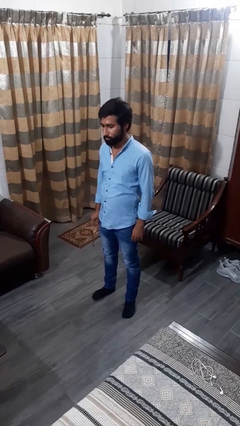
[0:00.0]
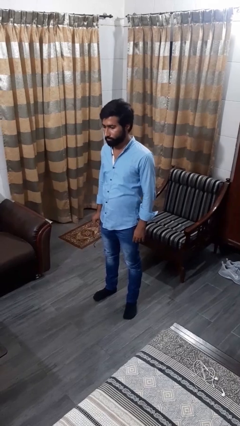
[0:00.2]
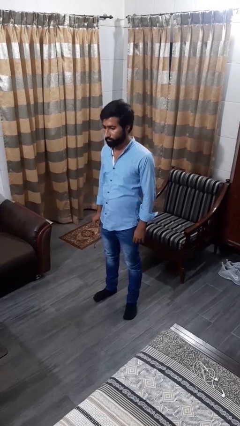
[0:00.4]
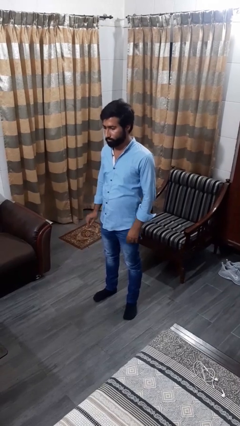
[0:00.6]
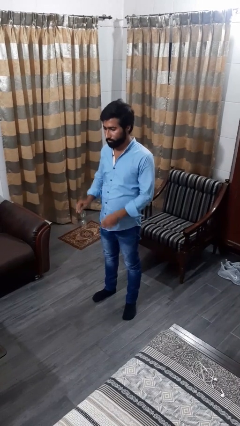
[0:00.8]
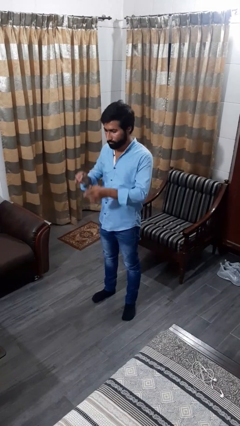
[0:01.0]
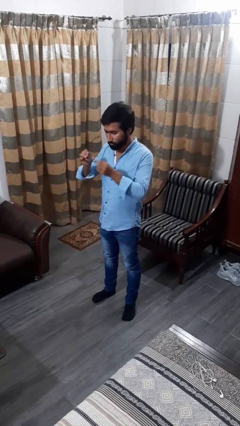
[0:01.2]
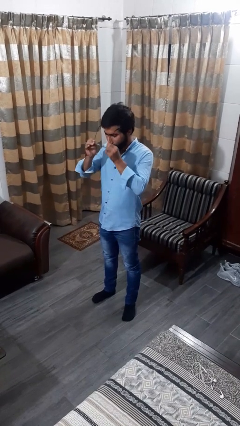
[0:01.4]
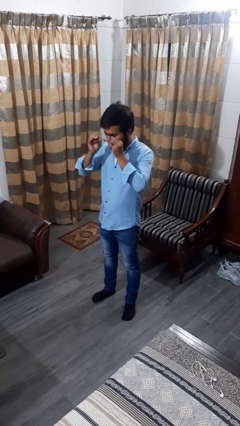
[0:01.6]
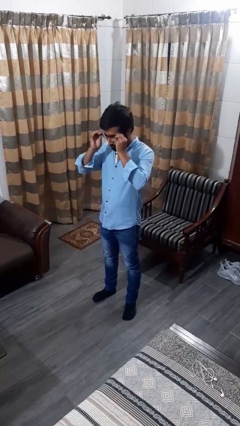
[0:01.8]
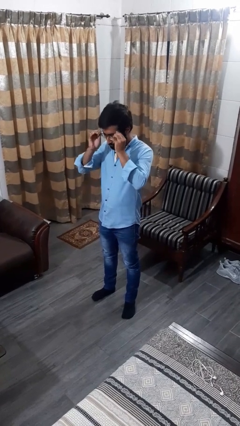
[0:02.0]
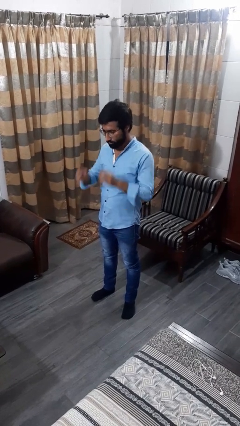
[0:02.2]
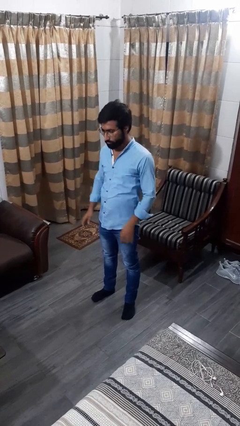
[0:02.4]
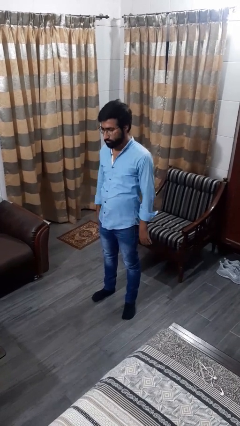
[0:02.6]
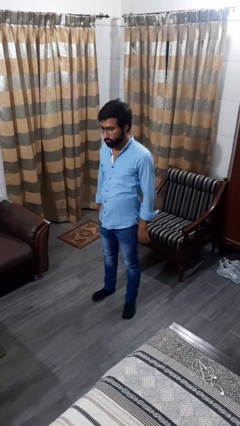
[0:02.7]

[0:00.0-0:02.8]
person puts on glasses

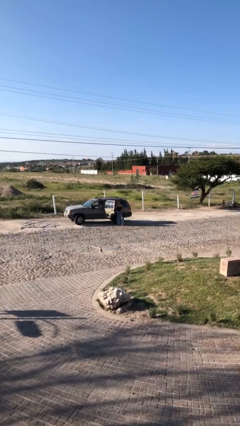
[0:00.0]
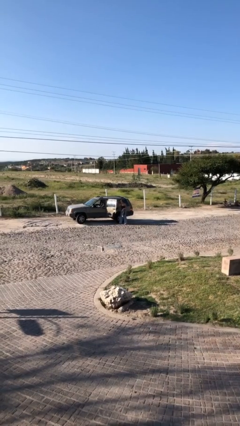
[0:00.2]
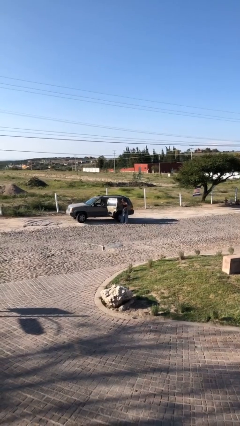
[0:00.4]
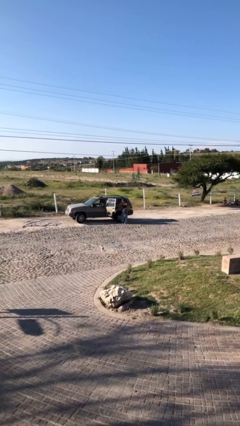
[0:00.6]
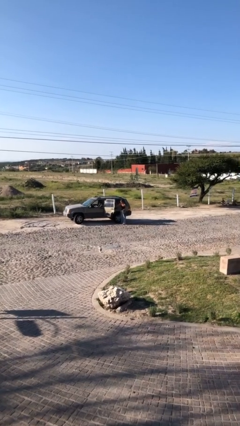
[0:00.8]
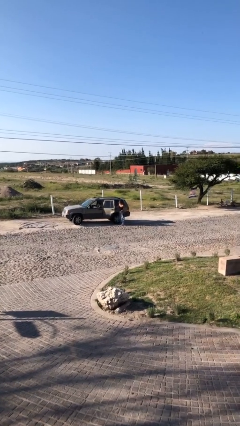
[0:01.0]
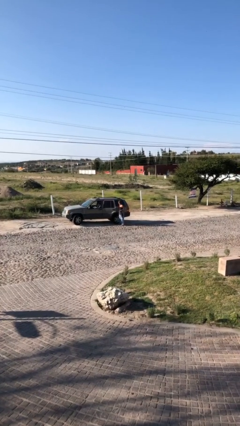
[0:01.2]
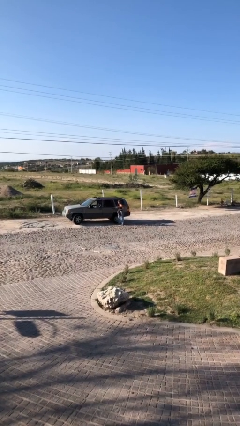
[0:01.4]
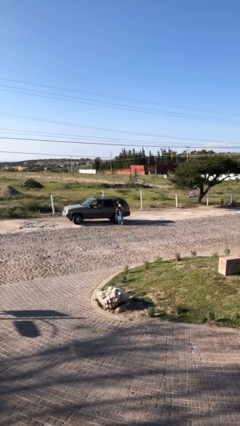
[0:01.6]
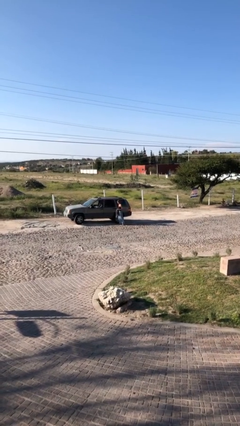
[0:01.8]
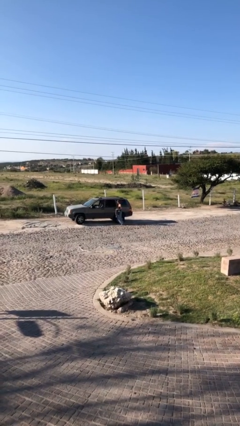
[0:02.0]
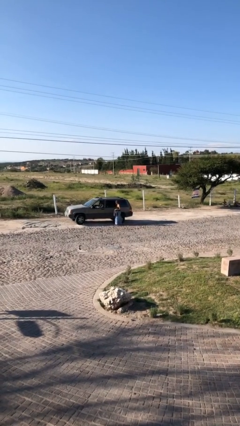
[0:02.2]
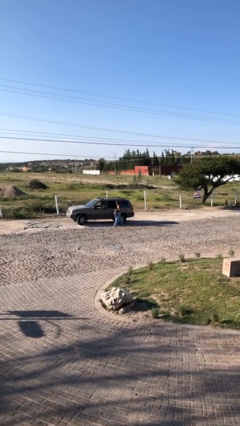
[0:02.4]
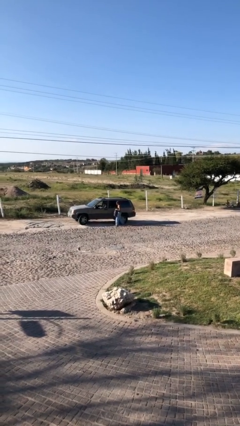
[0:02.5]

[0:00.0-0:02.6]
person closes car door

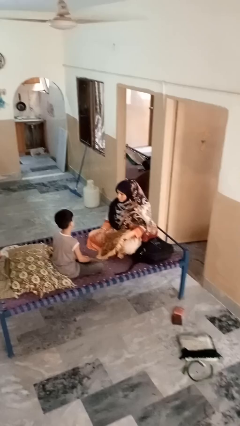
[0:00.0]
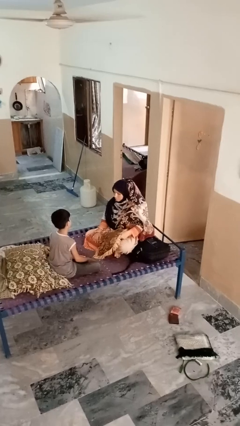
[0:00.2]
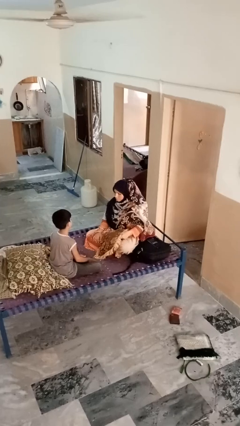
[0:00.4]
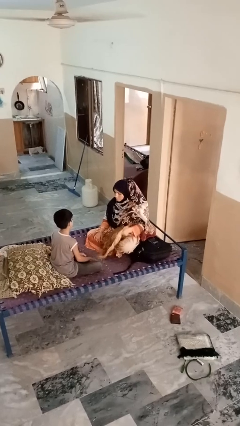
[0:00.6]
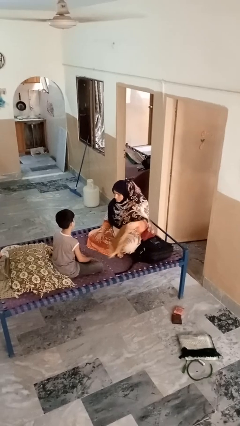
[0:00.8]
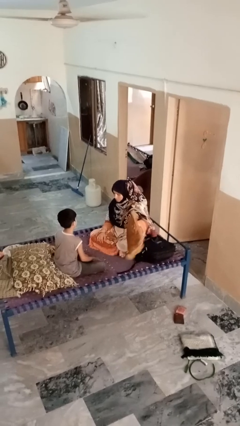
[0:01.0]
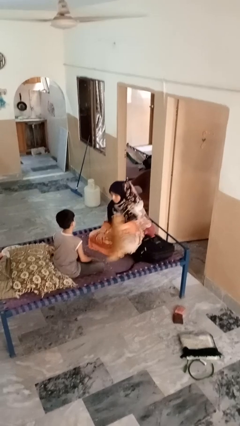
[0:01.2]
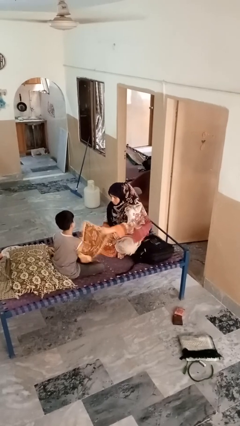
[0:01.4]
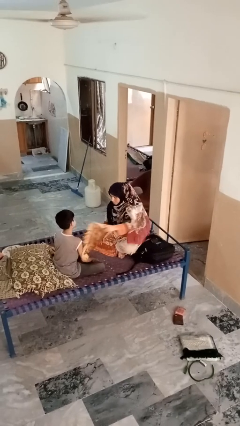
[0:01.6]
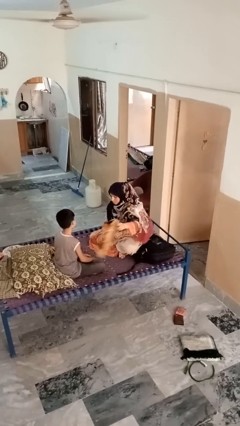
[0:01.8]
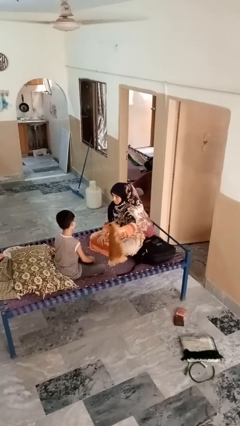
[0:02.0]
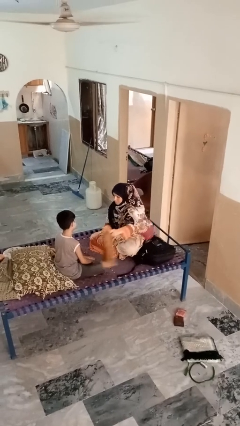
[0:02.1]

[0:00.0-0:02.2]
person hits person with pillow

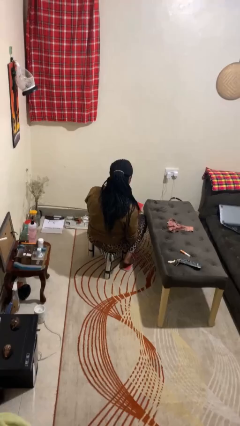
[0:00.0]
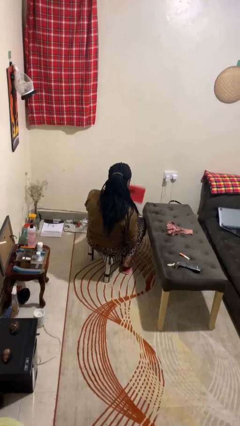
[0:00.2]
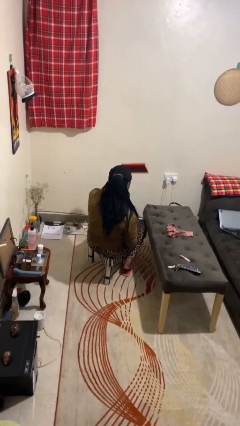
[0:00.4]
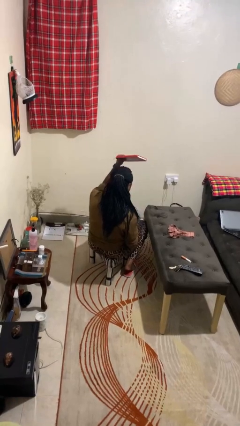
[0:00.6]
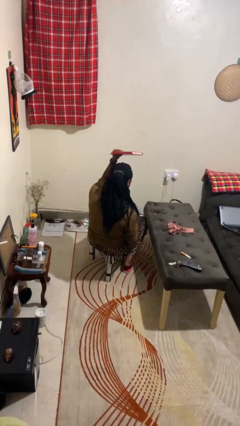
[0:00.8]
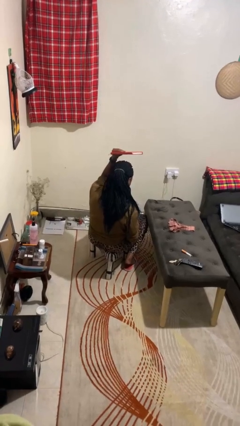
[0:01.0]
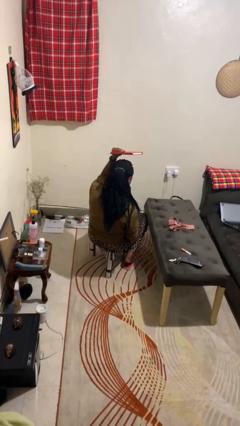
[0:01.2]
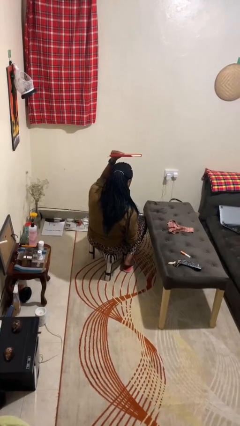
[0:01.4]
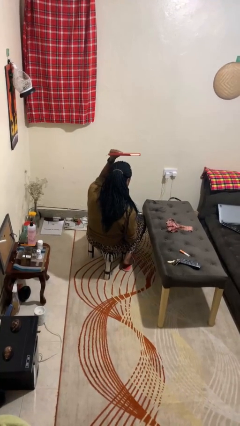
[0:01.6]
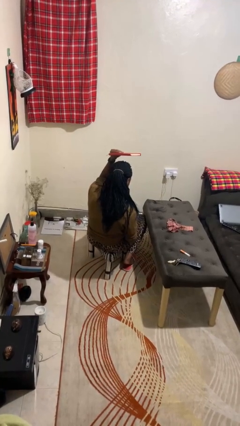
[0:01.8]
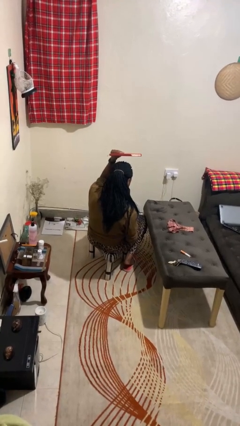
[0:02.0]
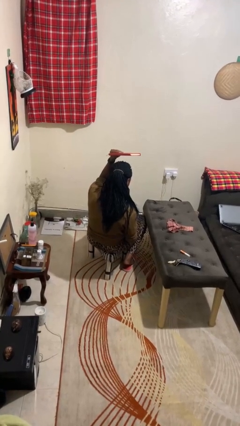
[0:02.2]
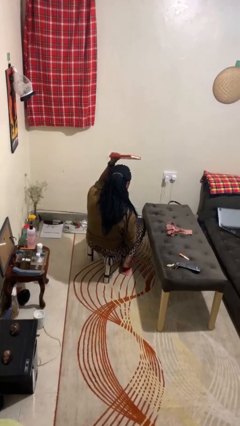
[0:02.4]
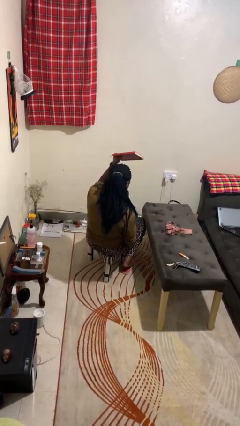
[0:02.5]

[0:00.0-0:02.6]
person holds object above head

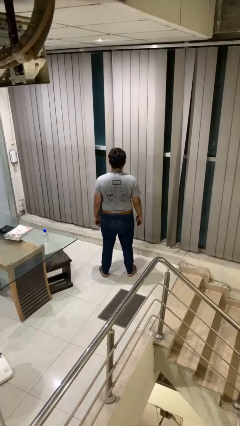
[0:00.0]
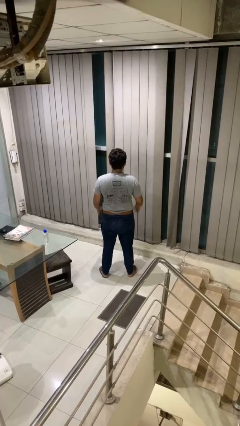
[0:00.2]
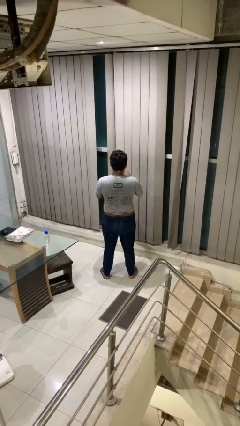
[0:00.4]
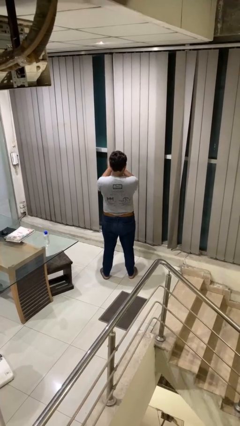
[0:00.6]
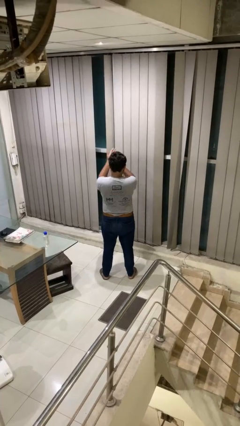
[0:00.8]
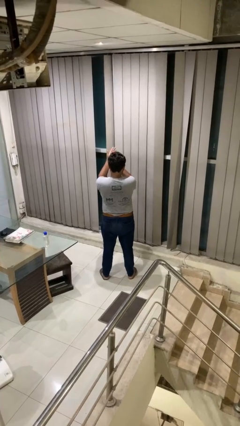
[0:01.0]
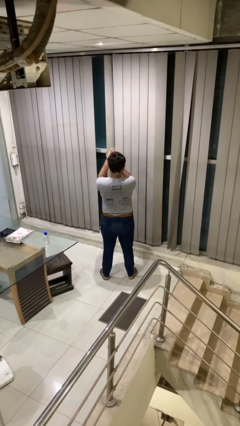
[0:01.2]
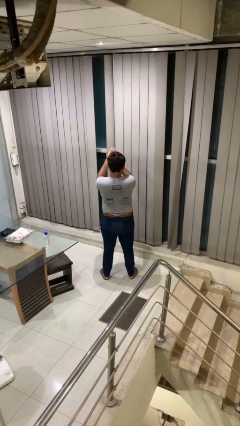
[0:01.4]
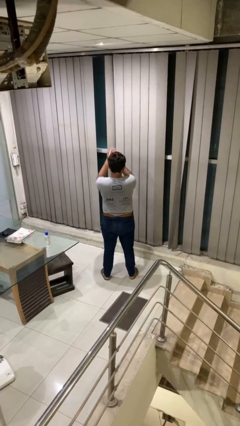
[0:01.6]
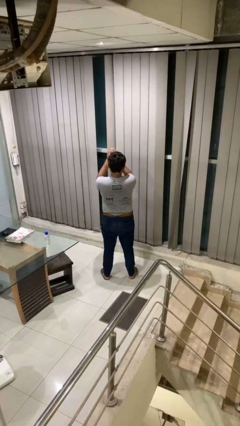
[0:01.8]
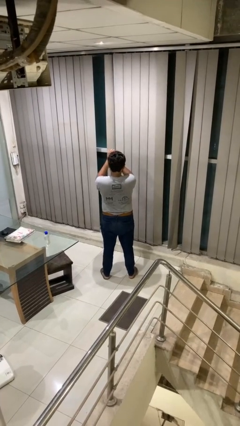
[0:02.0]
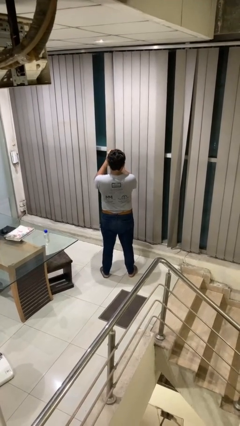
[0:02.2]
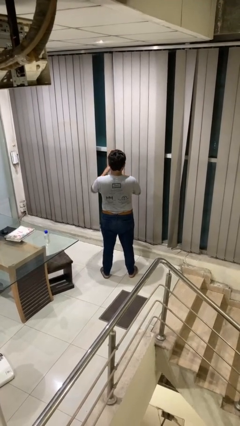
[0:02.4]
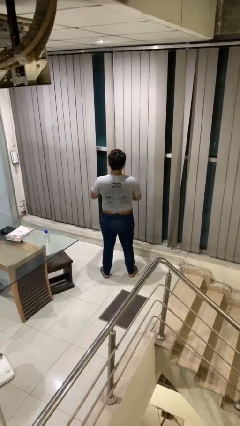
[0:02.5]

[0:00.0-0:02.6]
person claps hands

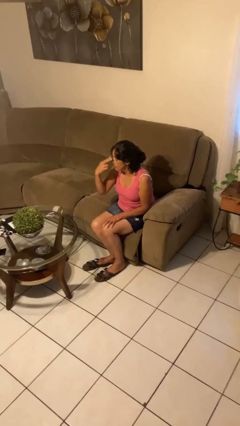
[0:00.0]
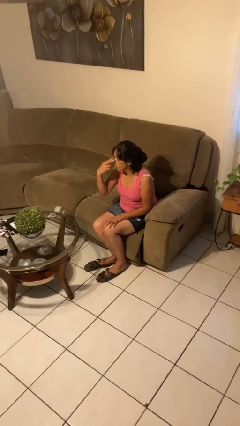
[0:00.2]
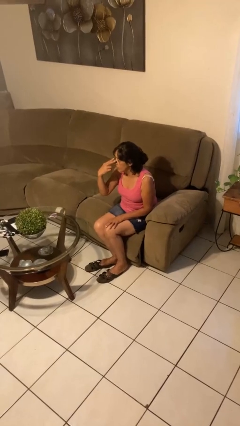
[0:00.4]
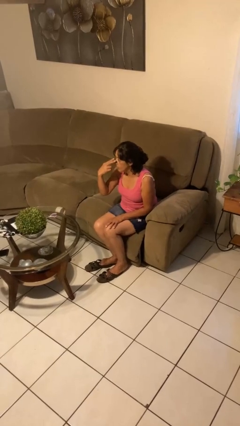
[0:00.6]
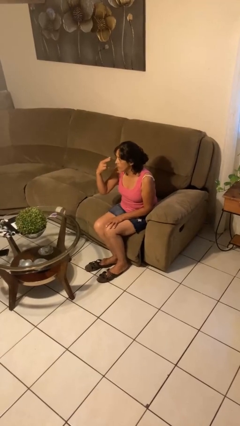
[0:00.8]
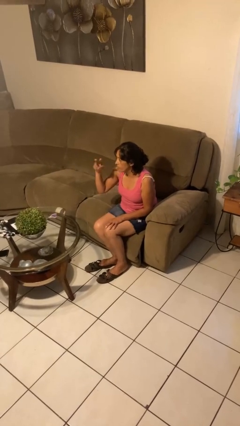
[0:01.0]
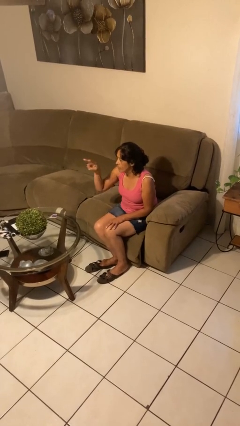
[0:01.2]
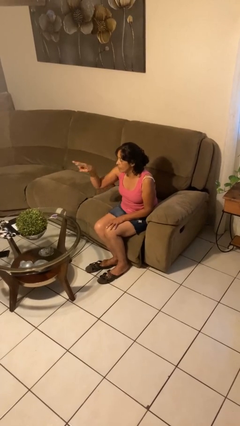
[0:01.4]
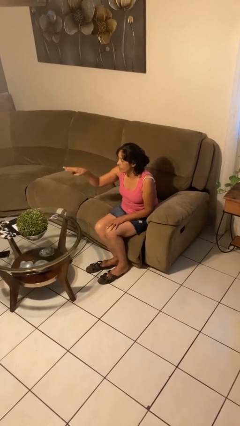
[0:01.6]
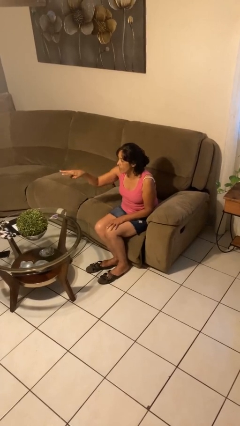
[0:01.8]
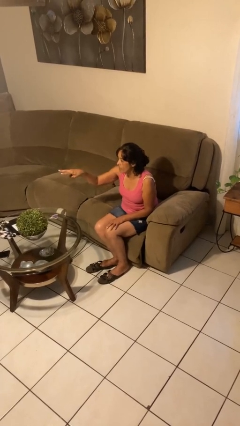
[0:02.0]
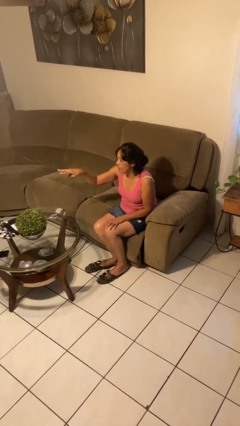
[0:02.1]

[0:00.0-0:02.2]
person gestures watch closely

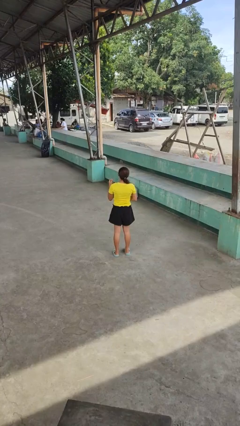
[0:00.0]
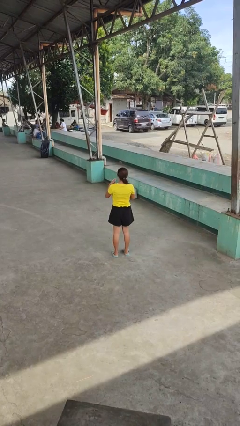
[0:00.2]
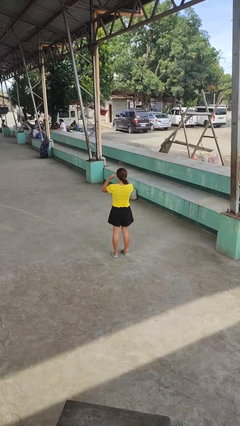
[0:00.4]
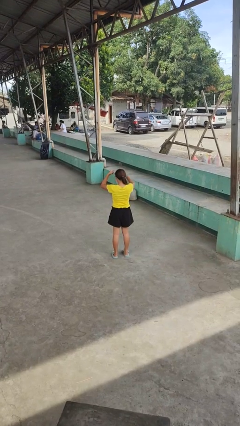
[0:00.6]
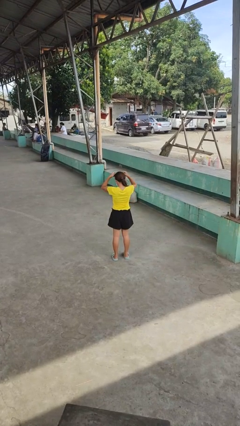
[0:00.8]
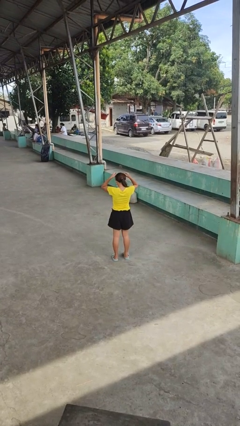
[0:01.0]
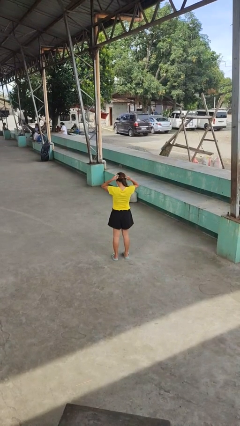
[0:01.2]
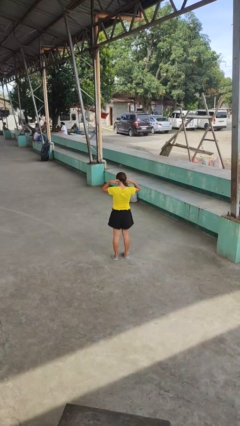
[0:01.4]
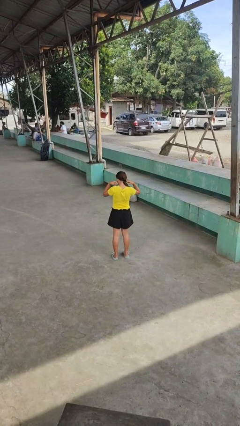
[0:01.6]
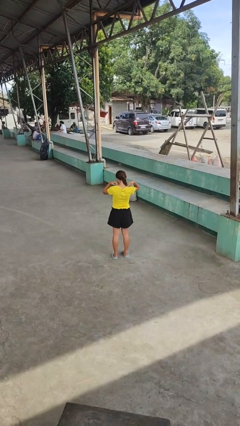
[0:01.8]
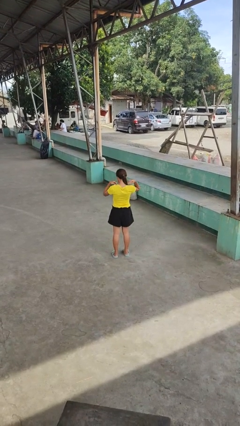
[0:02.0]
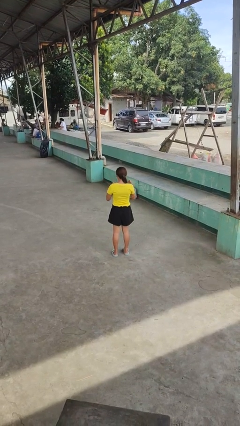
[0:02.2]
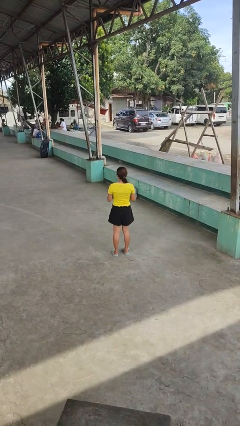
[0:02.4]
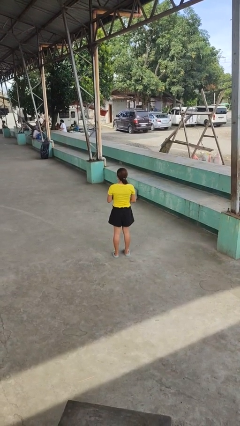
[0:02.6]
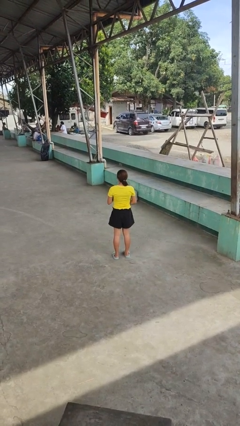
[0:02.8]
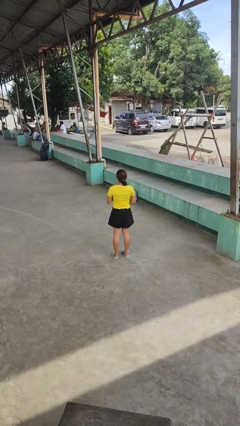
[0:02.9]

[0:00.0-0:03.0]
person puts on necklace
